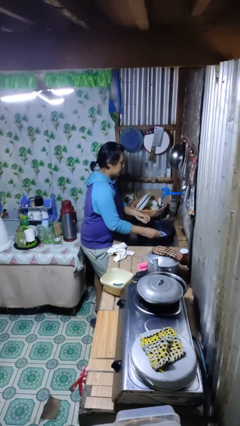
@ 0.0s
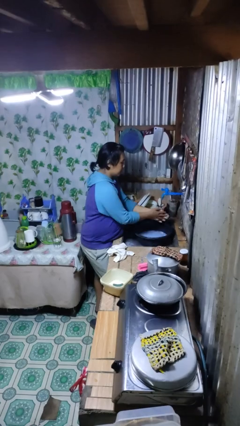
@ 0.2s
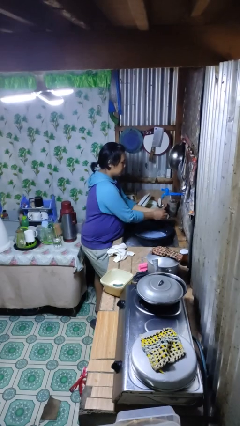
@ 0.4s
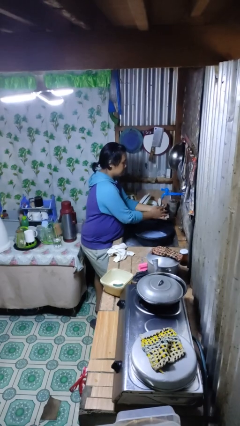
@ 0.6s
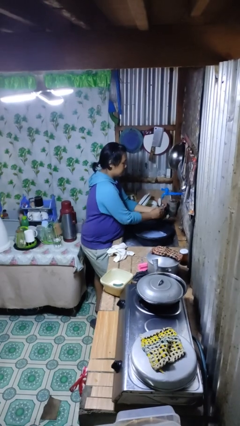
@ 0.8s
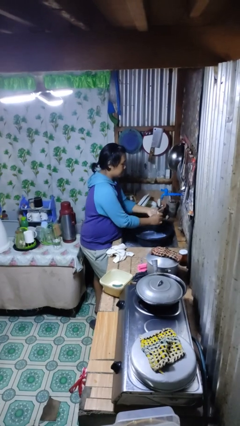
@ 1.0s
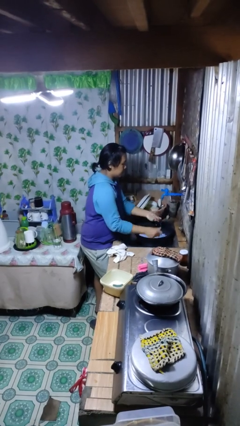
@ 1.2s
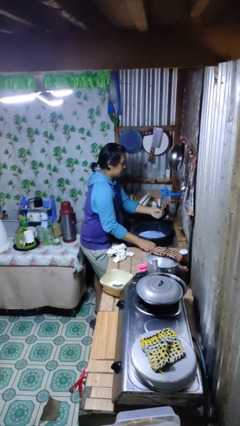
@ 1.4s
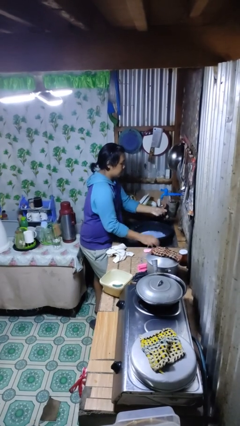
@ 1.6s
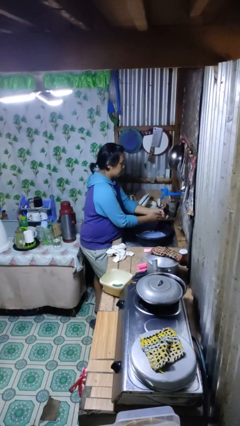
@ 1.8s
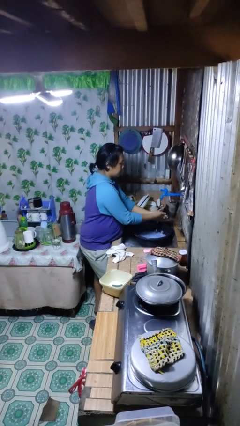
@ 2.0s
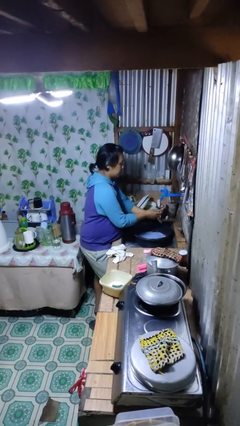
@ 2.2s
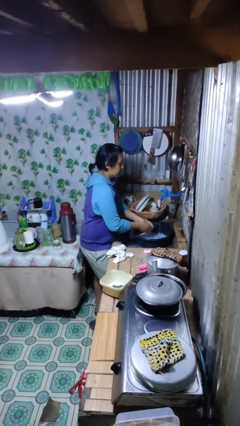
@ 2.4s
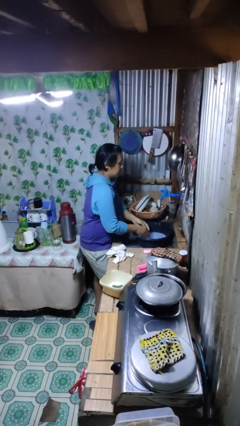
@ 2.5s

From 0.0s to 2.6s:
person washes hands

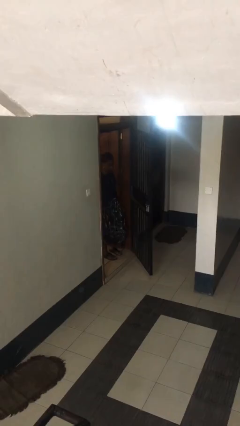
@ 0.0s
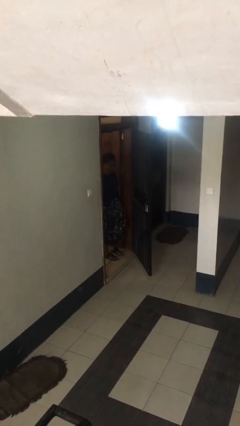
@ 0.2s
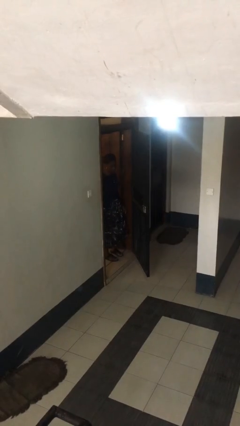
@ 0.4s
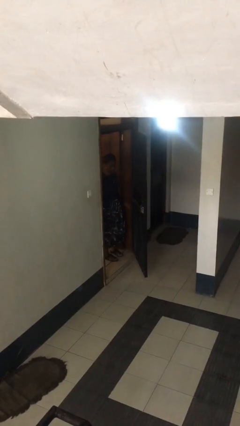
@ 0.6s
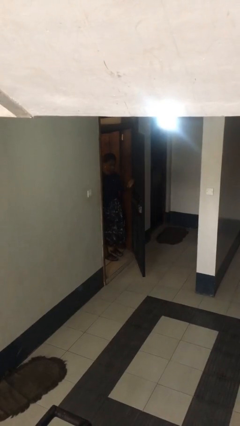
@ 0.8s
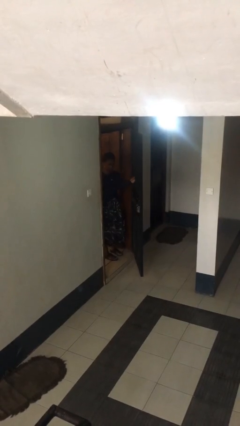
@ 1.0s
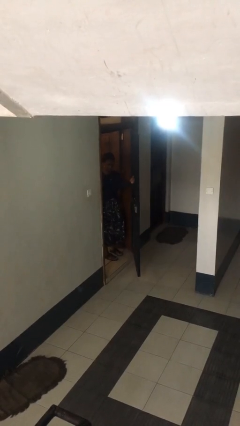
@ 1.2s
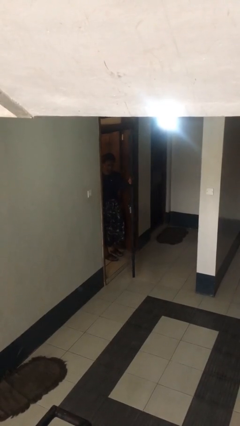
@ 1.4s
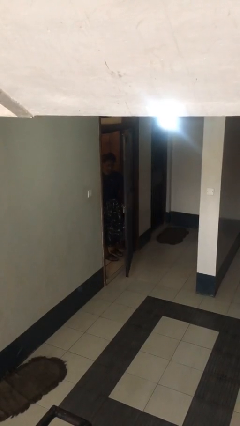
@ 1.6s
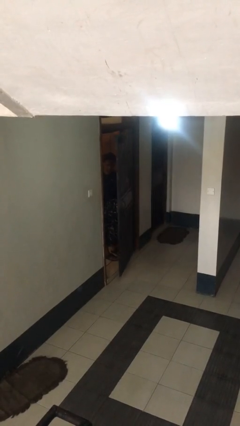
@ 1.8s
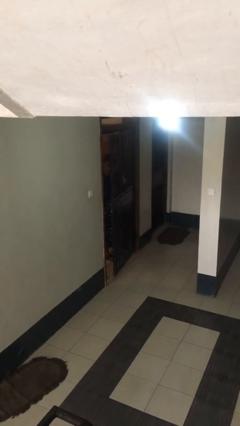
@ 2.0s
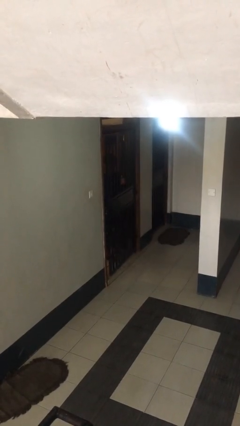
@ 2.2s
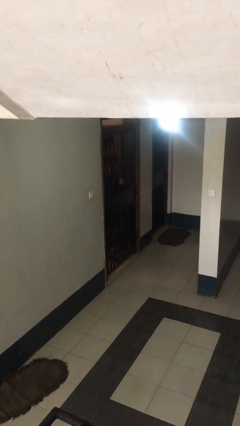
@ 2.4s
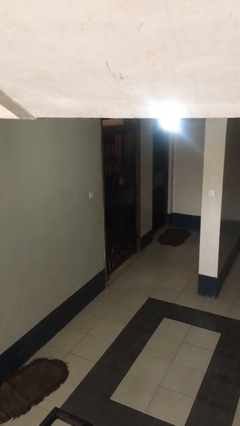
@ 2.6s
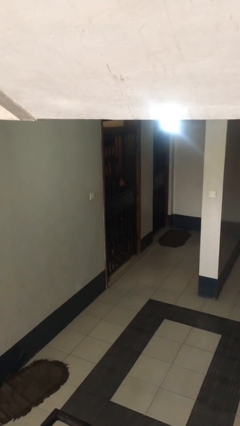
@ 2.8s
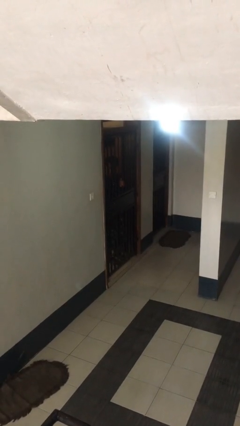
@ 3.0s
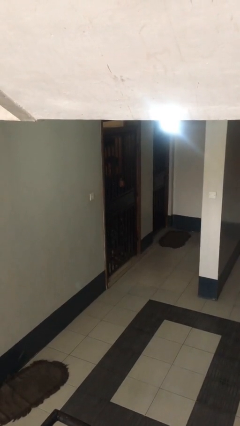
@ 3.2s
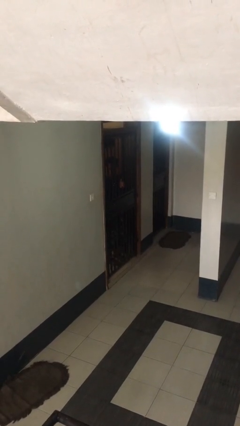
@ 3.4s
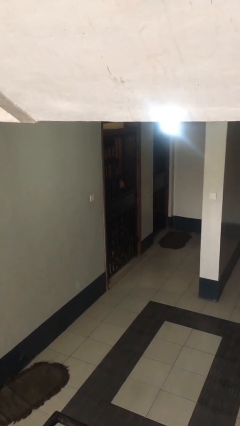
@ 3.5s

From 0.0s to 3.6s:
person closes facility door

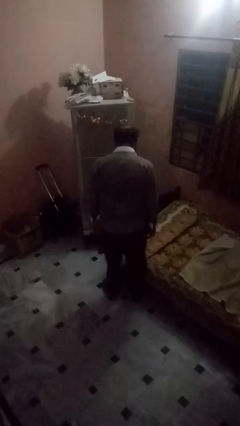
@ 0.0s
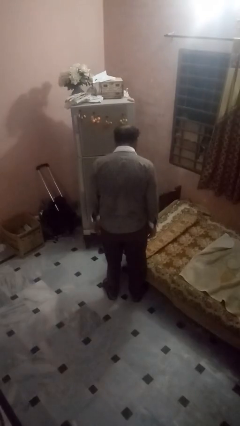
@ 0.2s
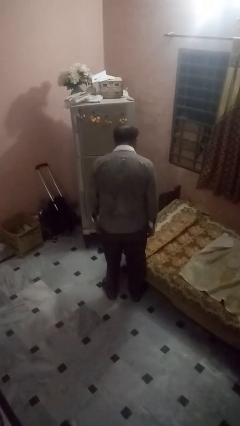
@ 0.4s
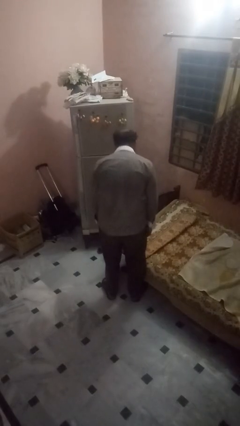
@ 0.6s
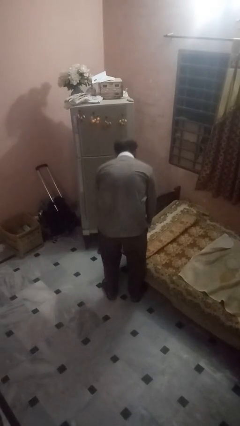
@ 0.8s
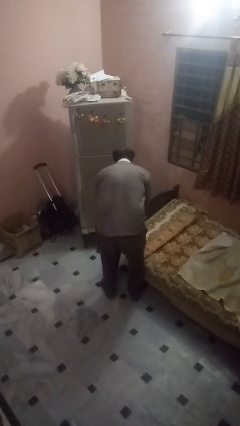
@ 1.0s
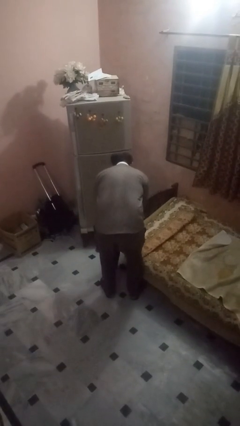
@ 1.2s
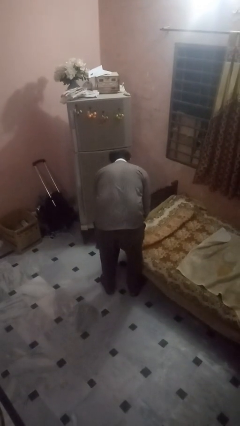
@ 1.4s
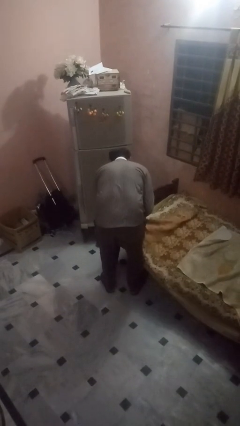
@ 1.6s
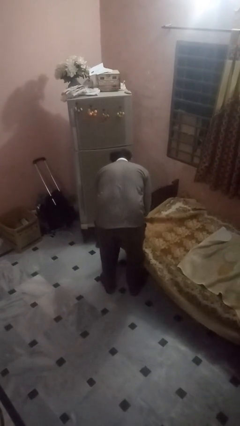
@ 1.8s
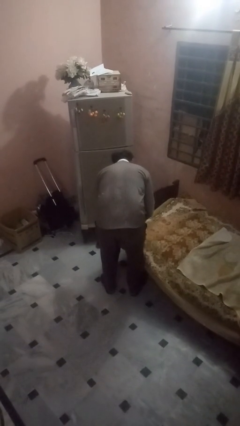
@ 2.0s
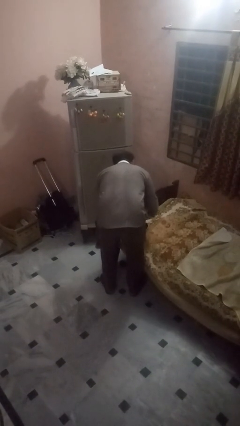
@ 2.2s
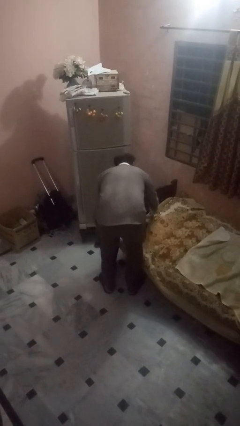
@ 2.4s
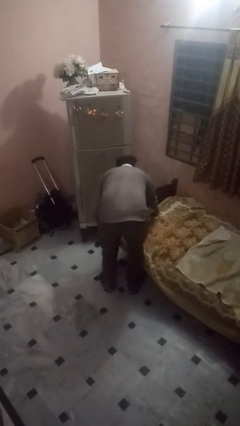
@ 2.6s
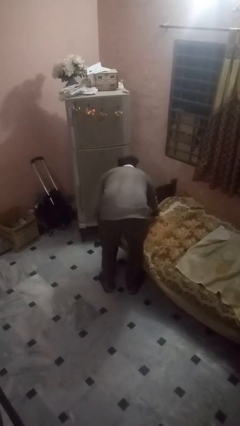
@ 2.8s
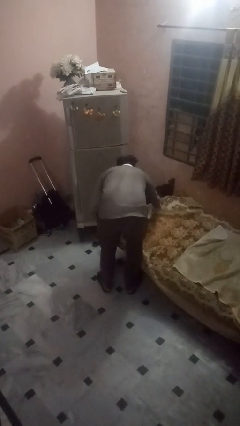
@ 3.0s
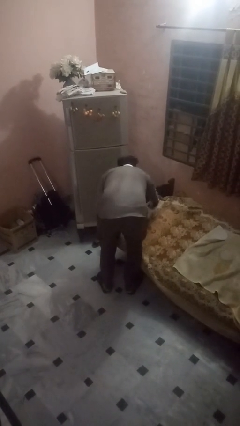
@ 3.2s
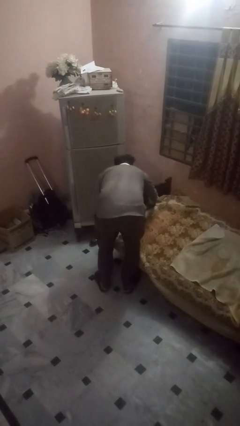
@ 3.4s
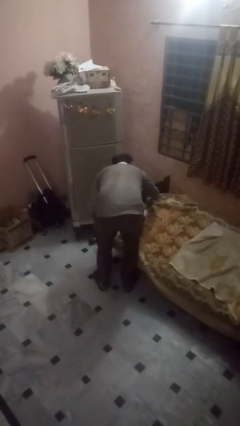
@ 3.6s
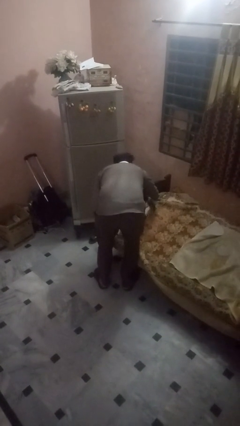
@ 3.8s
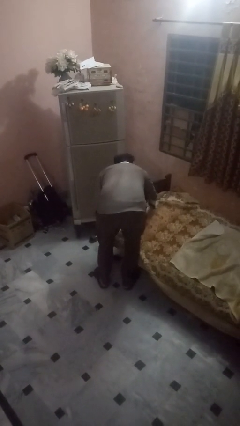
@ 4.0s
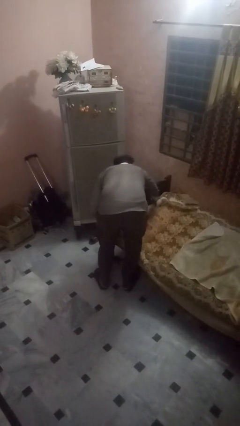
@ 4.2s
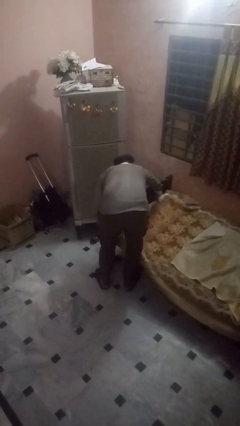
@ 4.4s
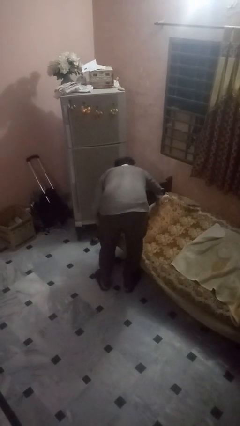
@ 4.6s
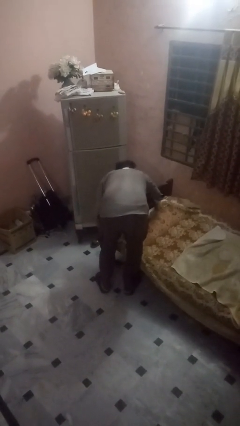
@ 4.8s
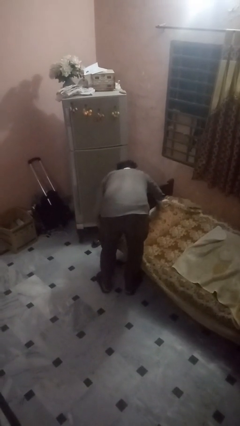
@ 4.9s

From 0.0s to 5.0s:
person makes bed

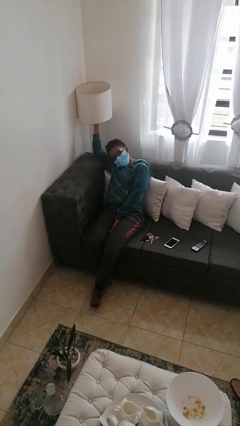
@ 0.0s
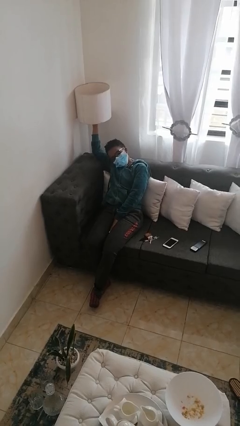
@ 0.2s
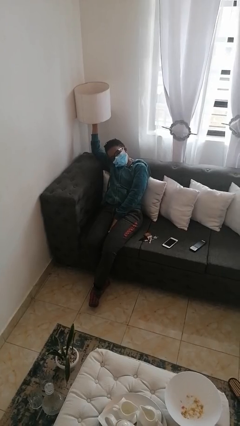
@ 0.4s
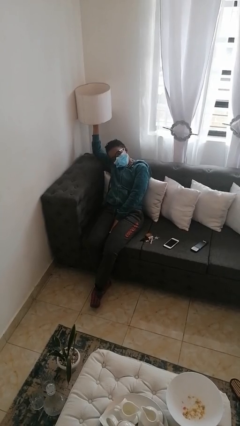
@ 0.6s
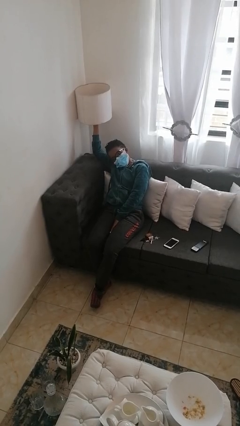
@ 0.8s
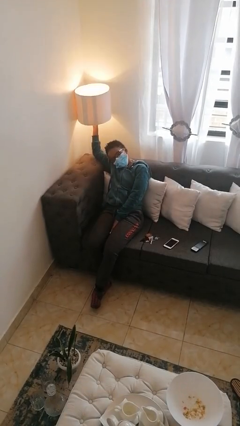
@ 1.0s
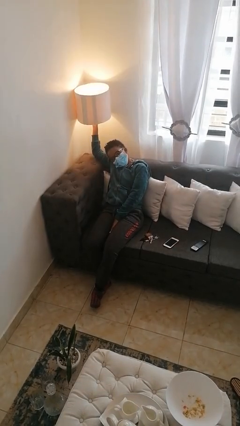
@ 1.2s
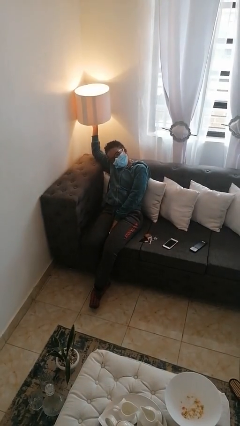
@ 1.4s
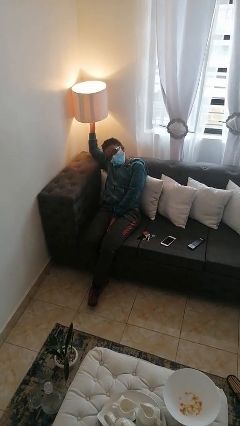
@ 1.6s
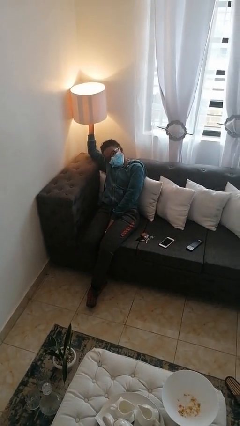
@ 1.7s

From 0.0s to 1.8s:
person turns on lamp

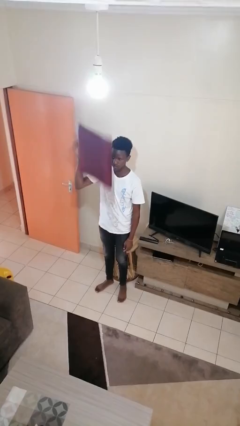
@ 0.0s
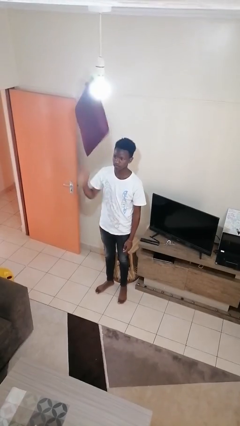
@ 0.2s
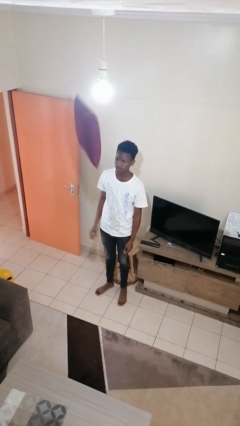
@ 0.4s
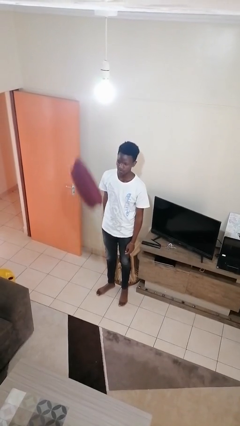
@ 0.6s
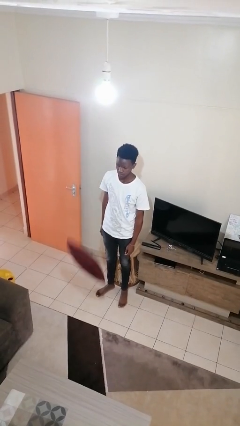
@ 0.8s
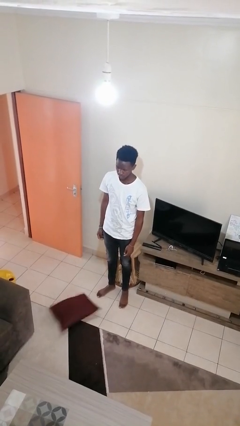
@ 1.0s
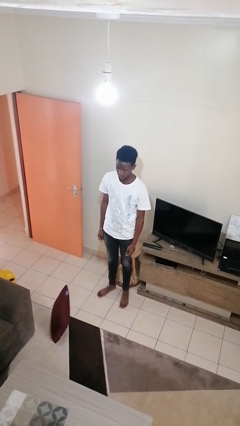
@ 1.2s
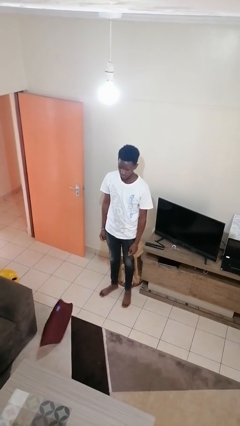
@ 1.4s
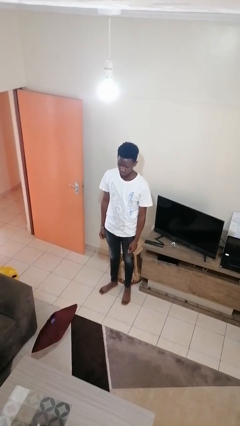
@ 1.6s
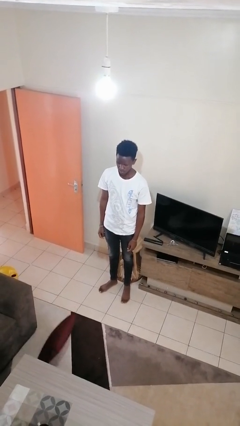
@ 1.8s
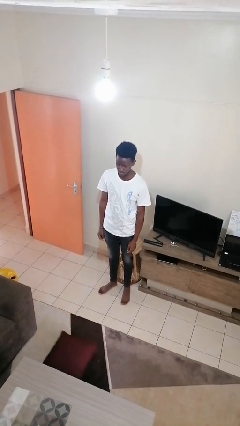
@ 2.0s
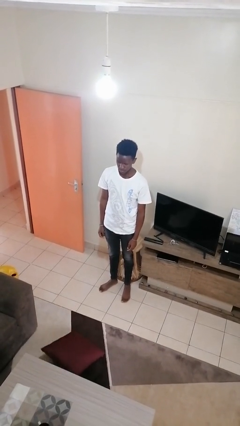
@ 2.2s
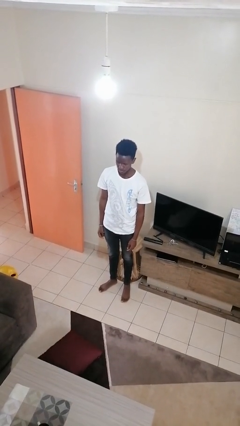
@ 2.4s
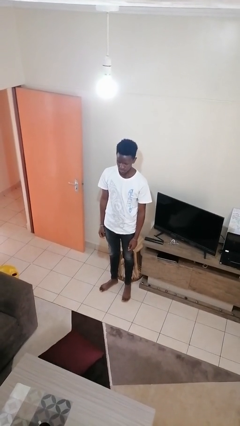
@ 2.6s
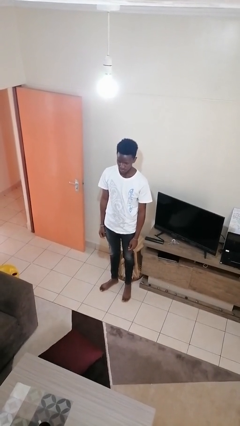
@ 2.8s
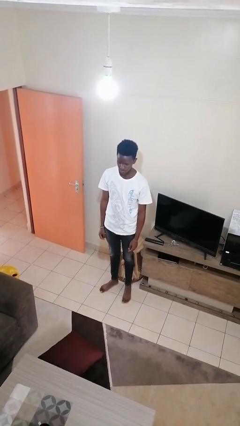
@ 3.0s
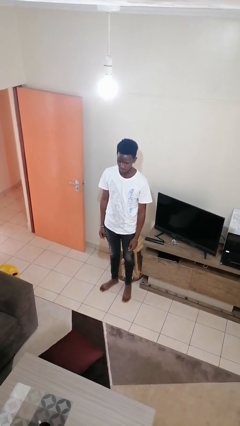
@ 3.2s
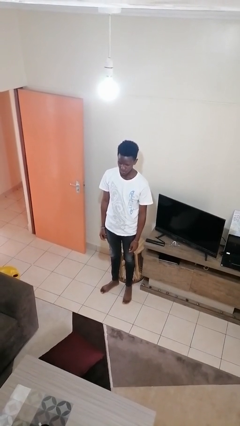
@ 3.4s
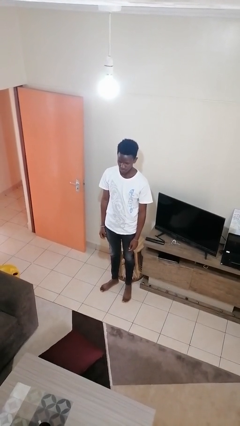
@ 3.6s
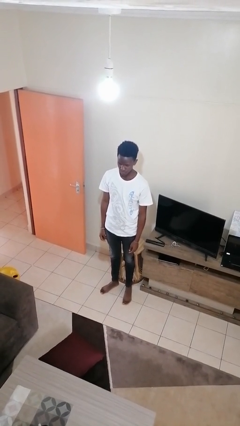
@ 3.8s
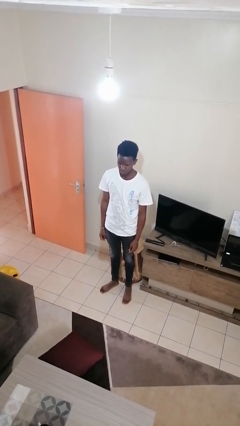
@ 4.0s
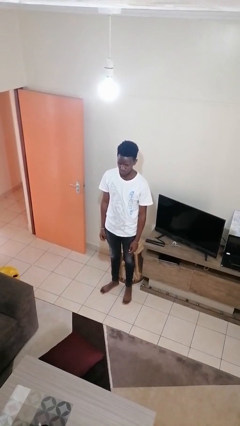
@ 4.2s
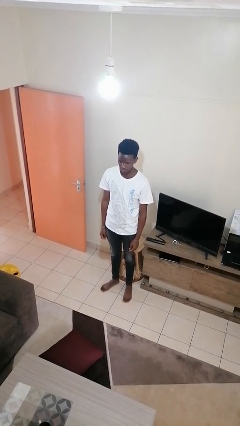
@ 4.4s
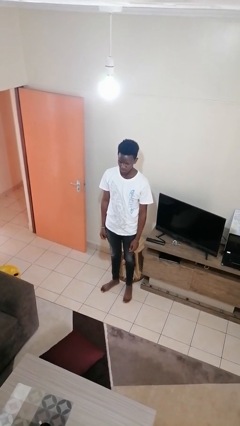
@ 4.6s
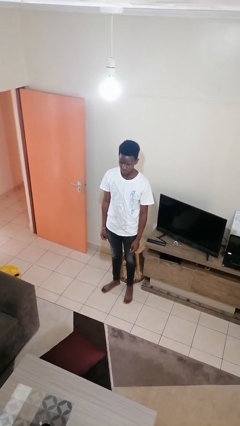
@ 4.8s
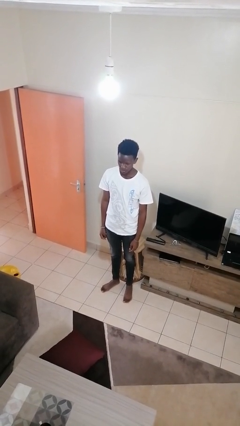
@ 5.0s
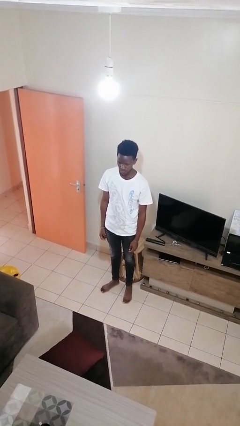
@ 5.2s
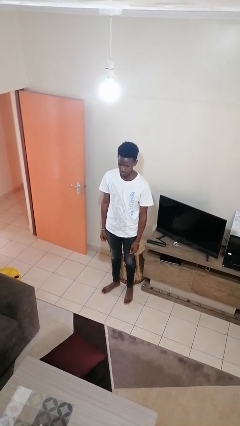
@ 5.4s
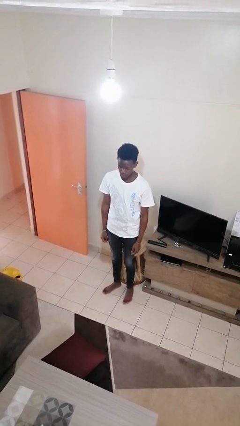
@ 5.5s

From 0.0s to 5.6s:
person throws object into air
